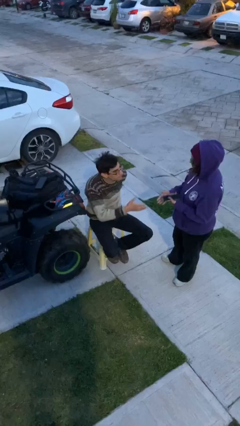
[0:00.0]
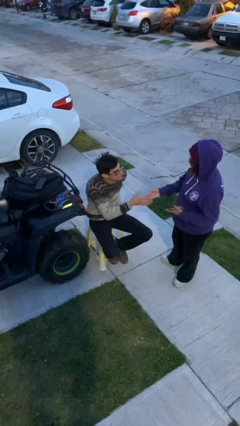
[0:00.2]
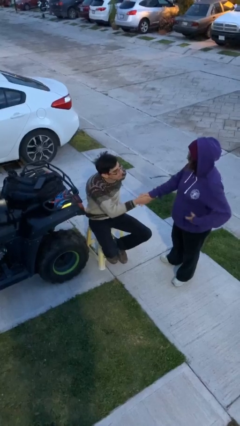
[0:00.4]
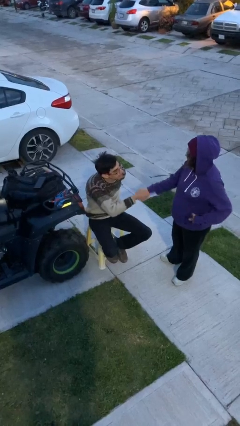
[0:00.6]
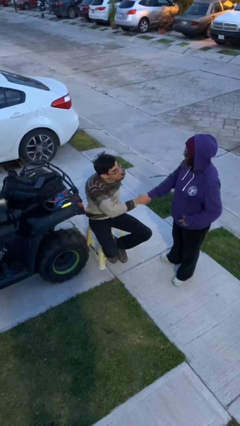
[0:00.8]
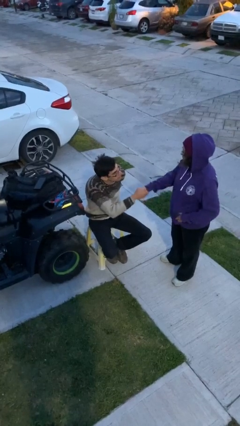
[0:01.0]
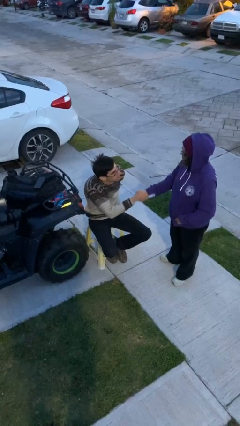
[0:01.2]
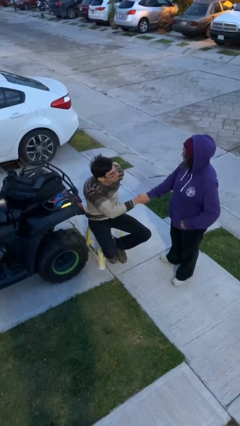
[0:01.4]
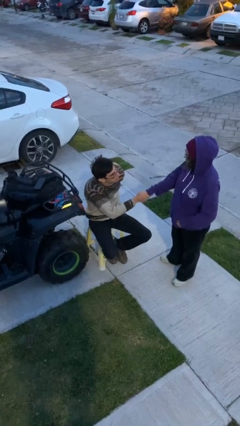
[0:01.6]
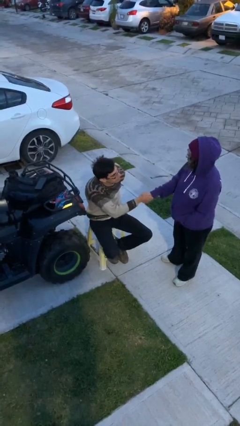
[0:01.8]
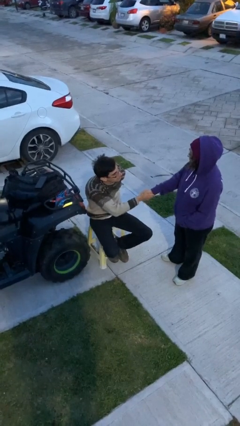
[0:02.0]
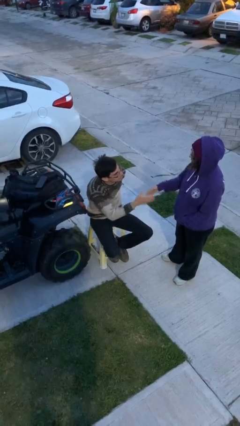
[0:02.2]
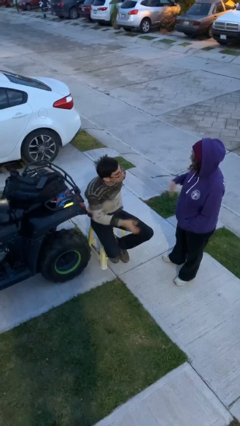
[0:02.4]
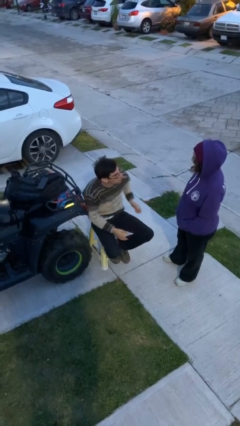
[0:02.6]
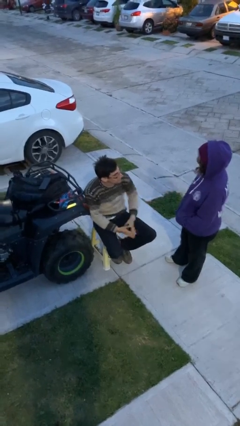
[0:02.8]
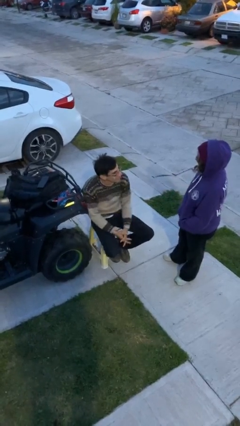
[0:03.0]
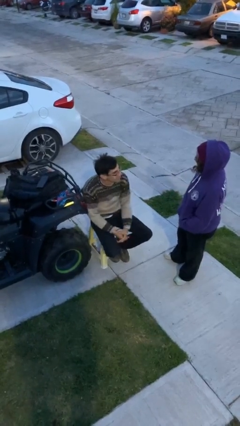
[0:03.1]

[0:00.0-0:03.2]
person shakes hand

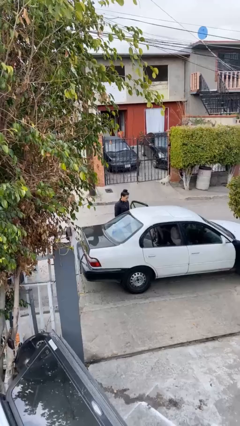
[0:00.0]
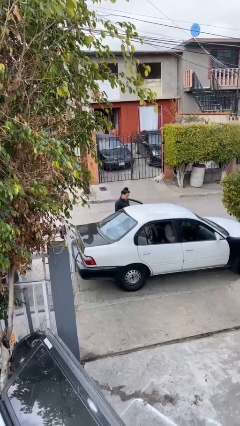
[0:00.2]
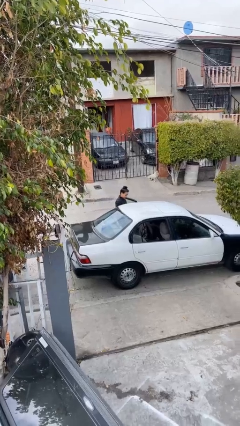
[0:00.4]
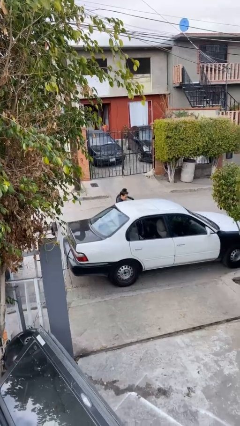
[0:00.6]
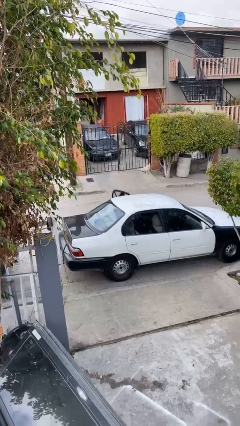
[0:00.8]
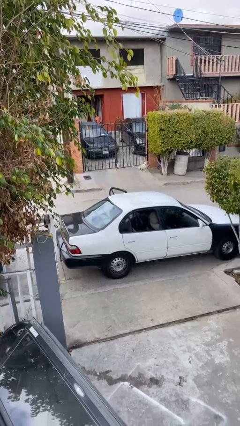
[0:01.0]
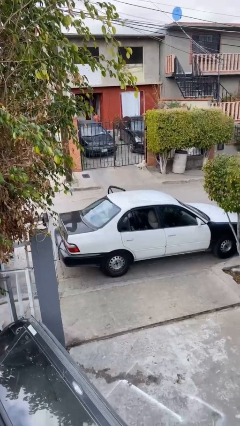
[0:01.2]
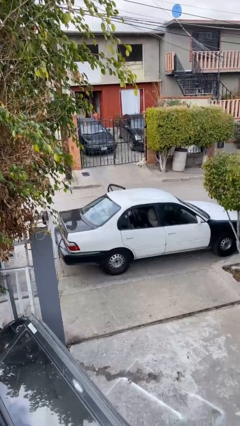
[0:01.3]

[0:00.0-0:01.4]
person enters car

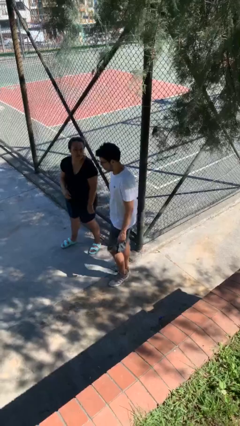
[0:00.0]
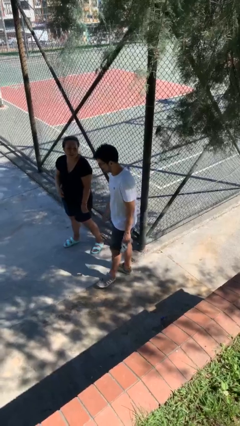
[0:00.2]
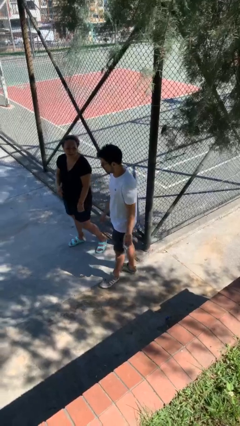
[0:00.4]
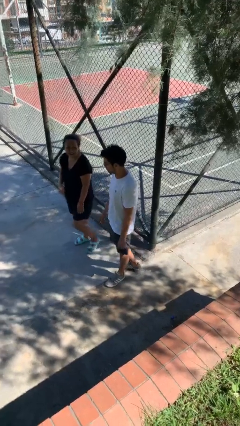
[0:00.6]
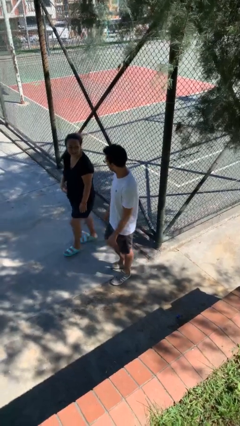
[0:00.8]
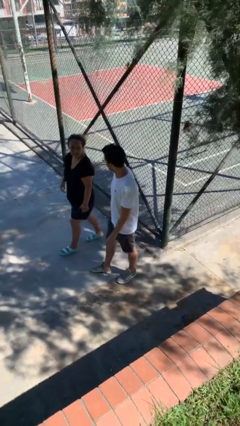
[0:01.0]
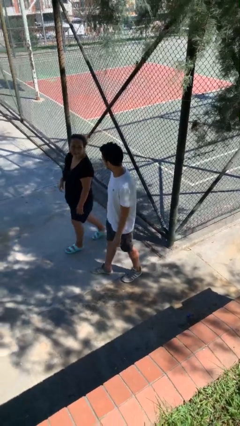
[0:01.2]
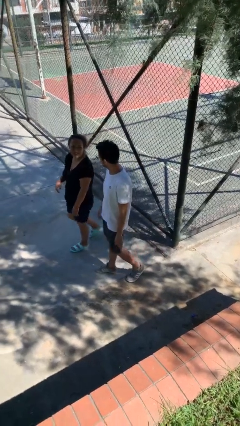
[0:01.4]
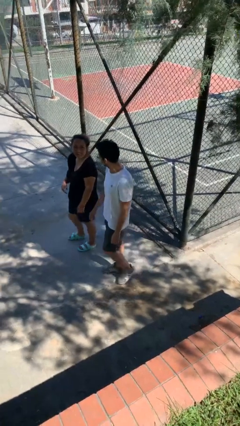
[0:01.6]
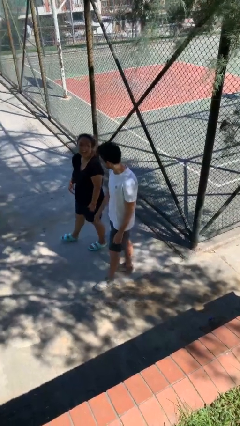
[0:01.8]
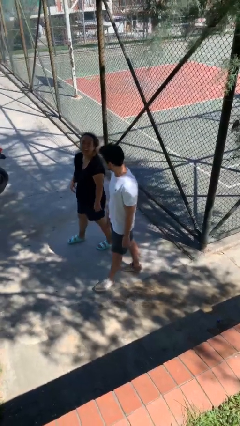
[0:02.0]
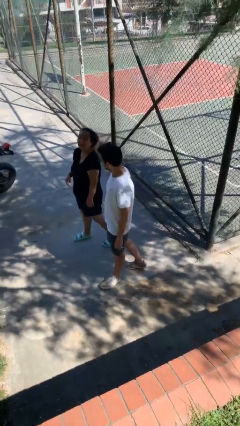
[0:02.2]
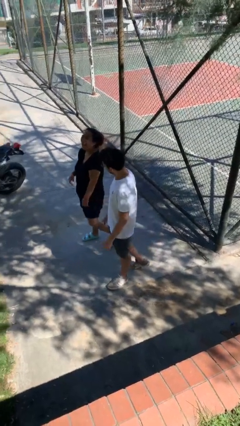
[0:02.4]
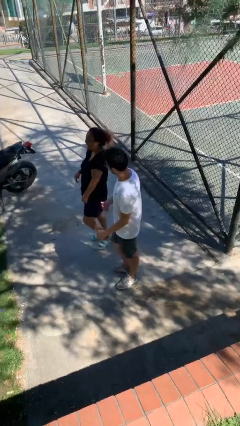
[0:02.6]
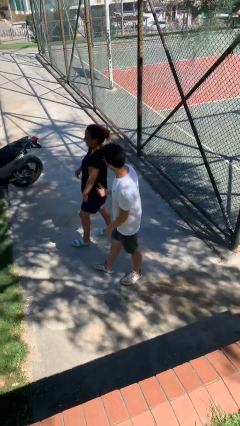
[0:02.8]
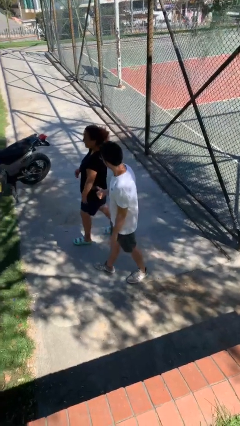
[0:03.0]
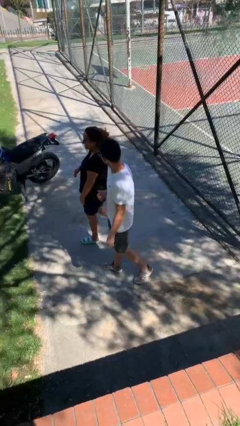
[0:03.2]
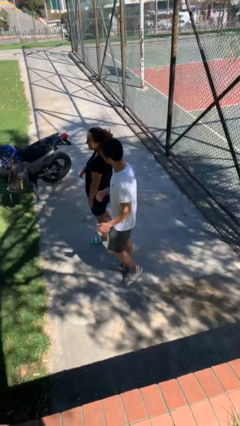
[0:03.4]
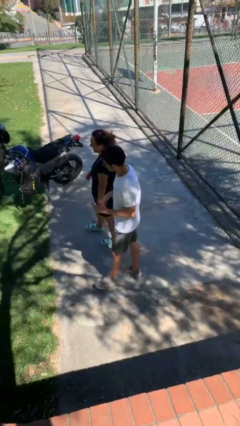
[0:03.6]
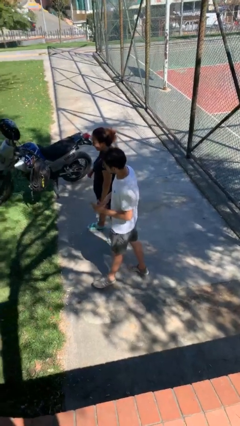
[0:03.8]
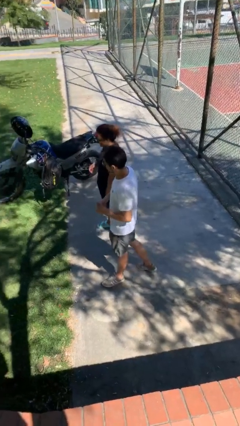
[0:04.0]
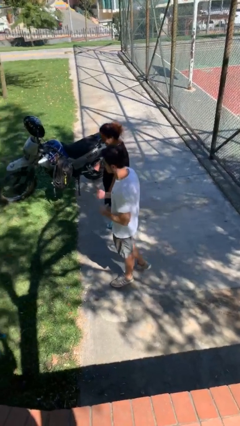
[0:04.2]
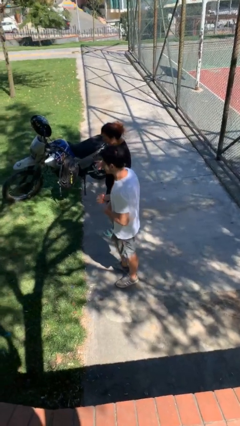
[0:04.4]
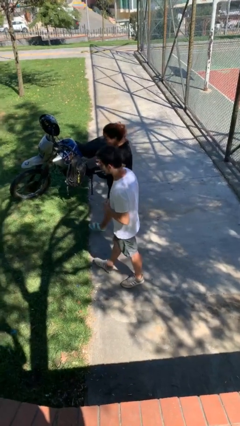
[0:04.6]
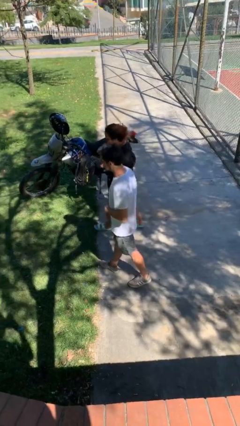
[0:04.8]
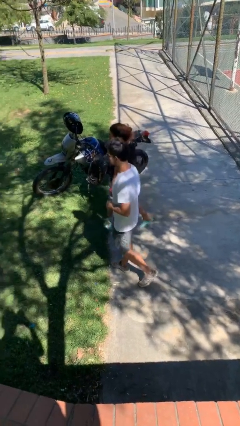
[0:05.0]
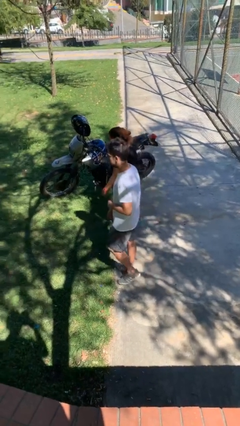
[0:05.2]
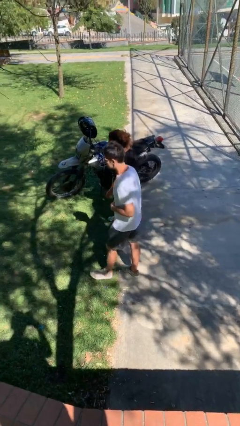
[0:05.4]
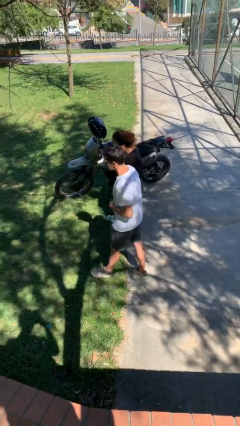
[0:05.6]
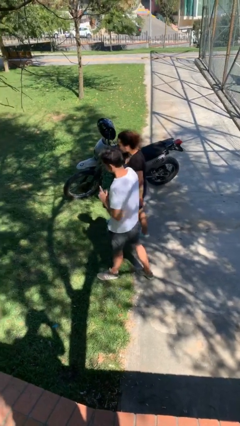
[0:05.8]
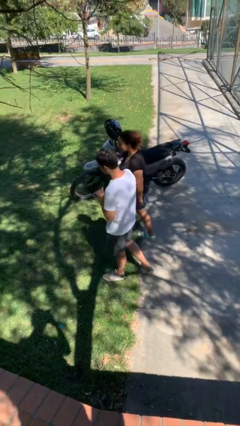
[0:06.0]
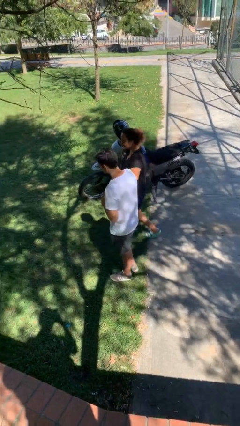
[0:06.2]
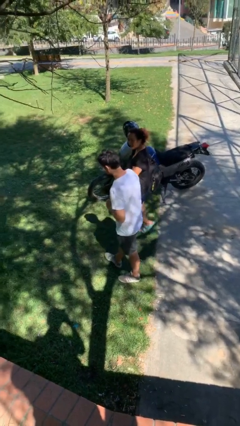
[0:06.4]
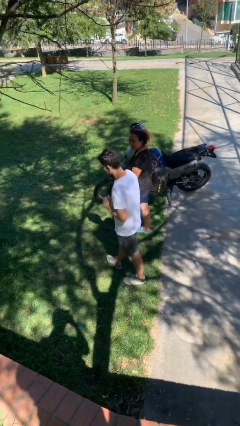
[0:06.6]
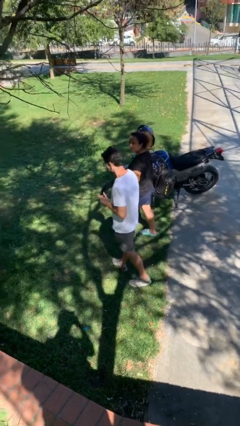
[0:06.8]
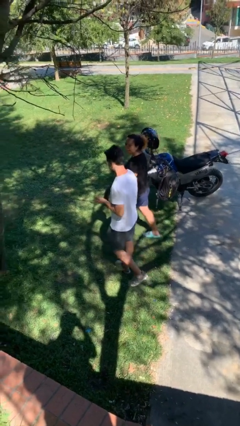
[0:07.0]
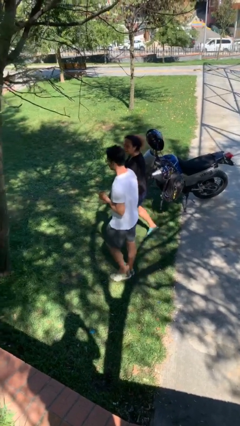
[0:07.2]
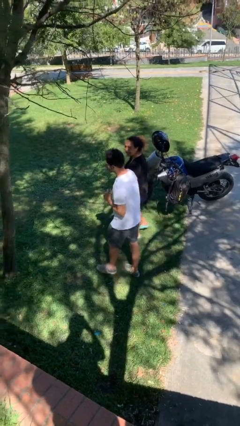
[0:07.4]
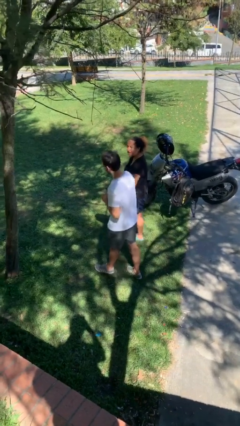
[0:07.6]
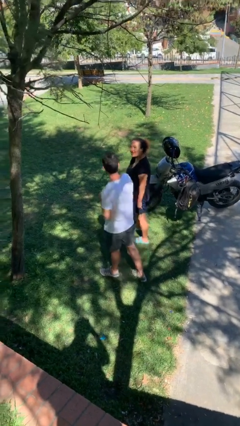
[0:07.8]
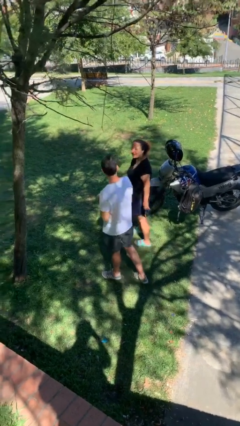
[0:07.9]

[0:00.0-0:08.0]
person talks to person

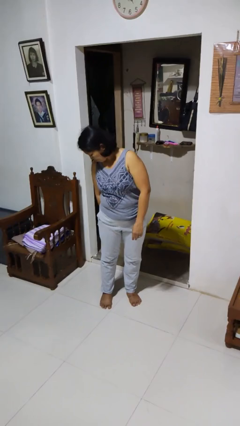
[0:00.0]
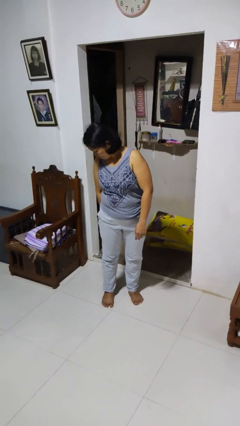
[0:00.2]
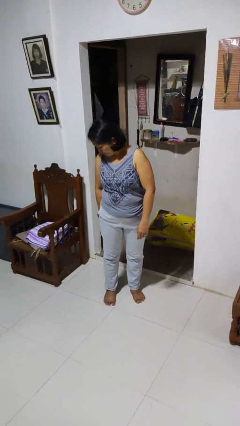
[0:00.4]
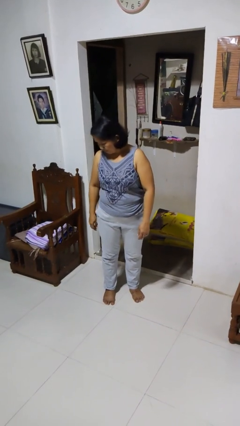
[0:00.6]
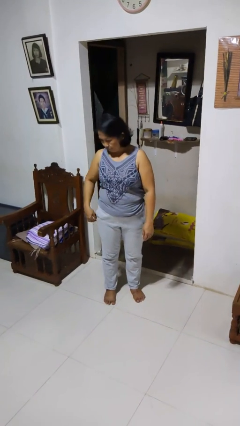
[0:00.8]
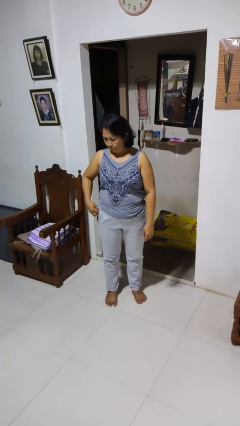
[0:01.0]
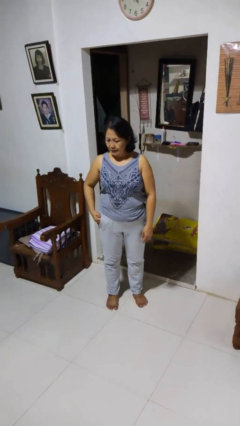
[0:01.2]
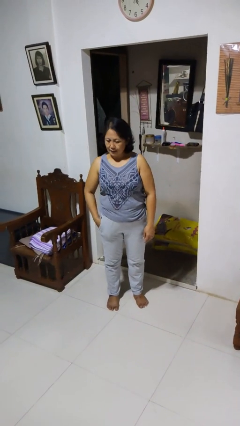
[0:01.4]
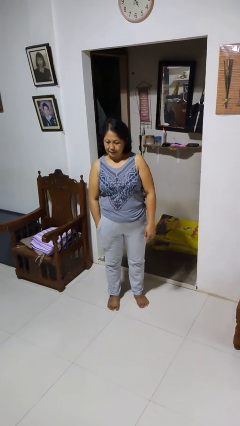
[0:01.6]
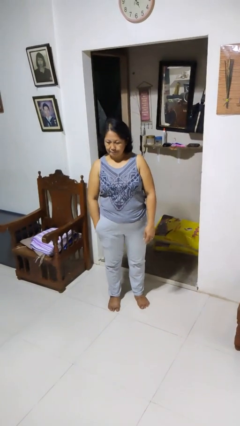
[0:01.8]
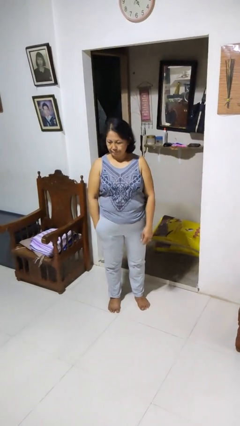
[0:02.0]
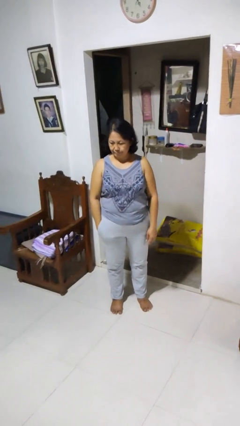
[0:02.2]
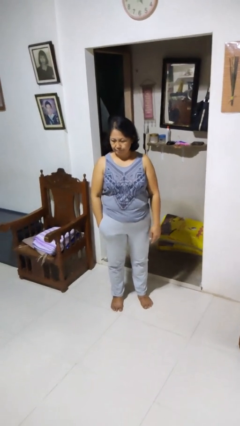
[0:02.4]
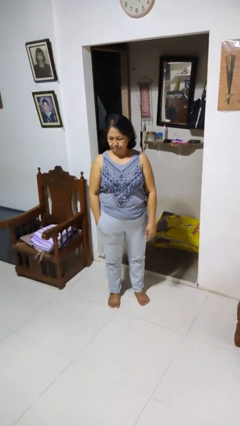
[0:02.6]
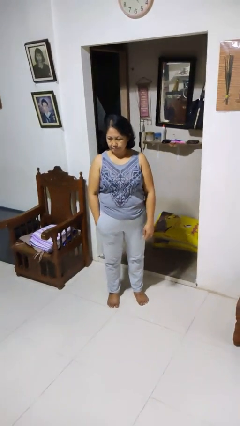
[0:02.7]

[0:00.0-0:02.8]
person puts hands in back pockets

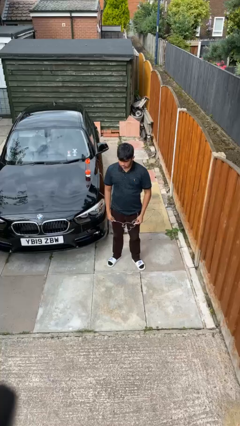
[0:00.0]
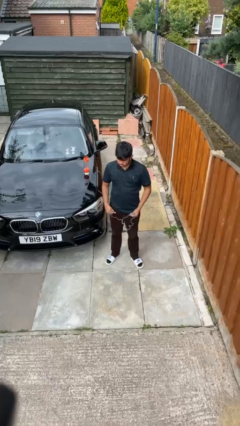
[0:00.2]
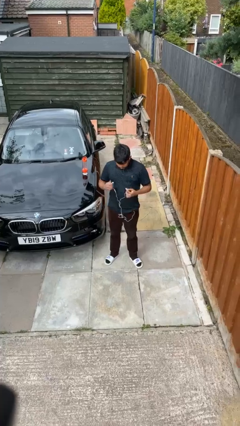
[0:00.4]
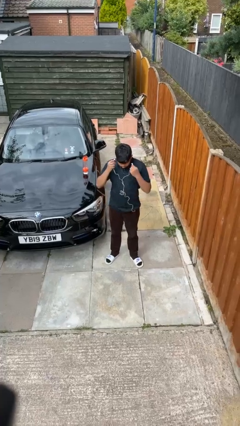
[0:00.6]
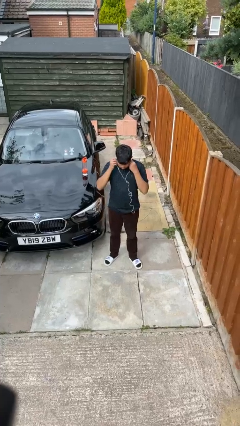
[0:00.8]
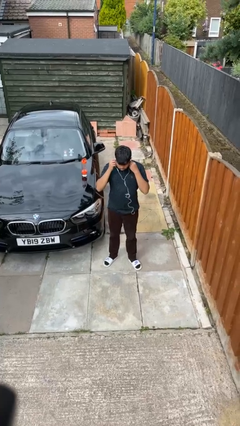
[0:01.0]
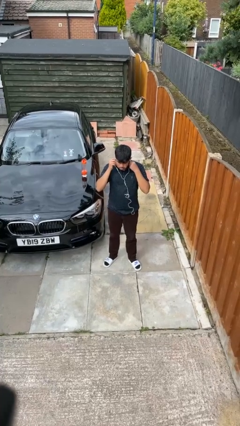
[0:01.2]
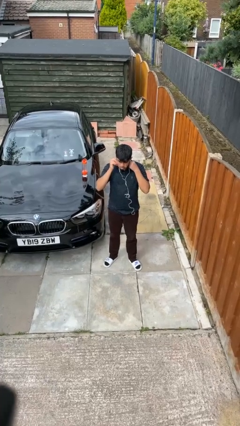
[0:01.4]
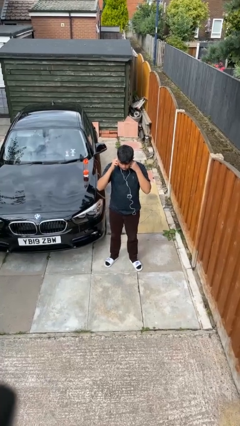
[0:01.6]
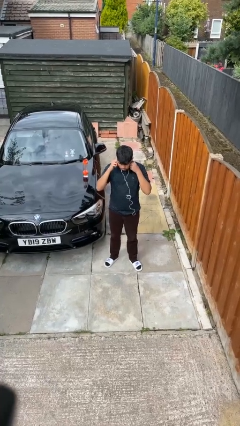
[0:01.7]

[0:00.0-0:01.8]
person puts on headphones
